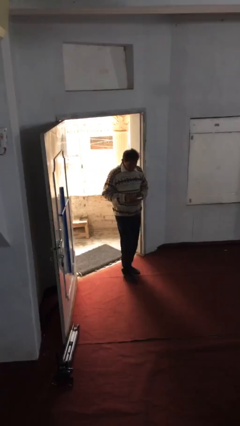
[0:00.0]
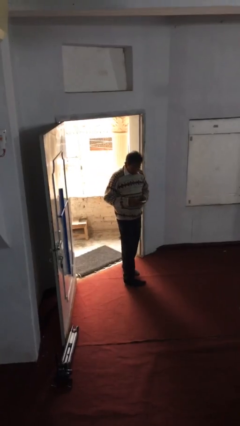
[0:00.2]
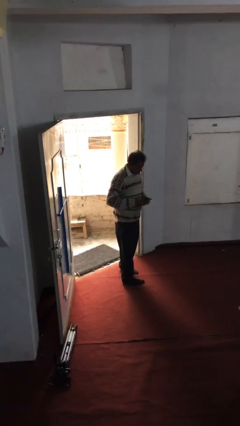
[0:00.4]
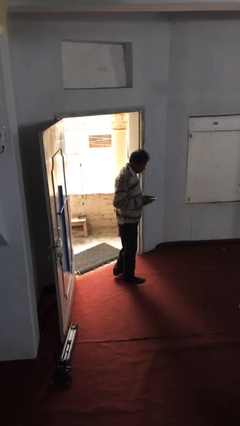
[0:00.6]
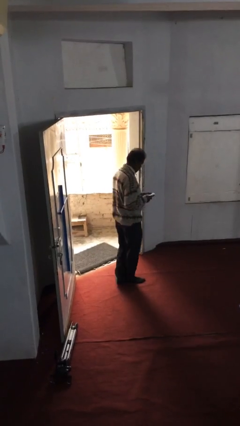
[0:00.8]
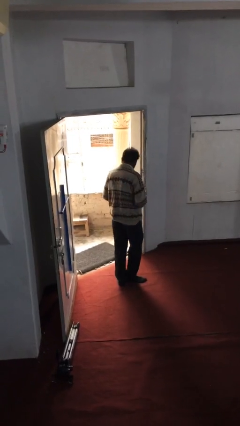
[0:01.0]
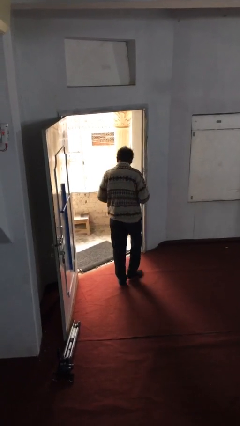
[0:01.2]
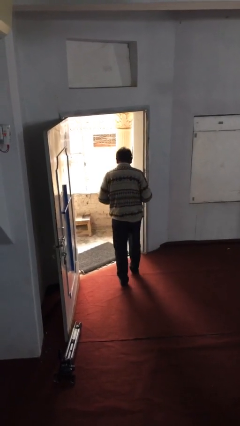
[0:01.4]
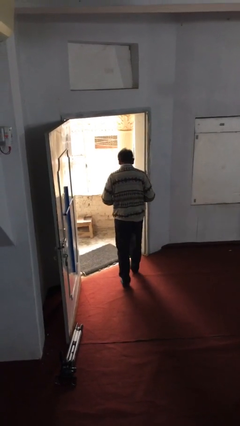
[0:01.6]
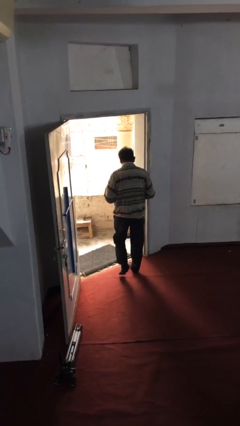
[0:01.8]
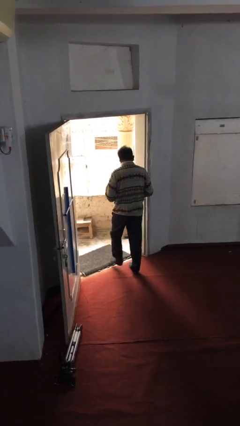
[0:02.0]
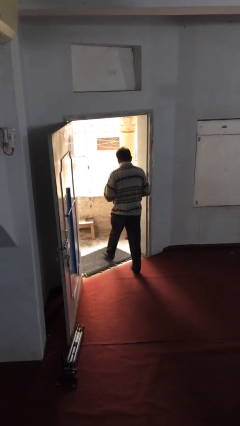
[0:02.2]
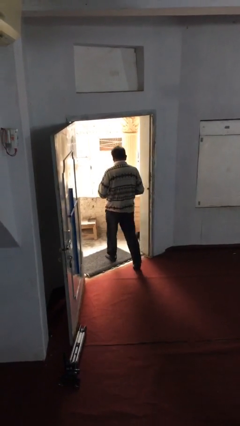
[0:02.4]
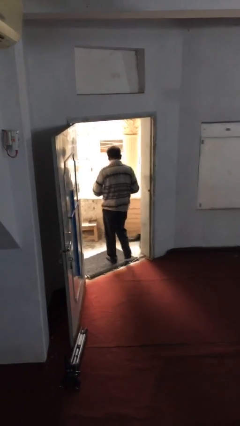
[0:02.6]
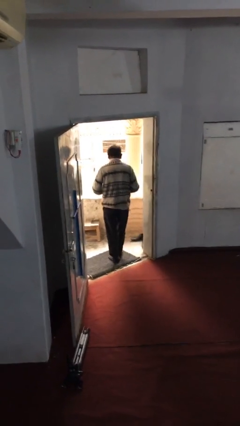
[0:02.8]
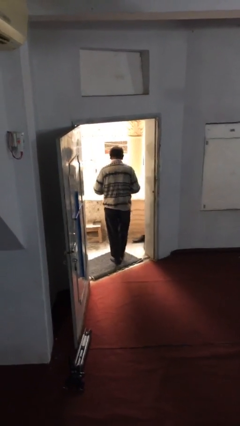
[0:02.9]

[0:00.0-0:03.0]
person exits scene through structure

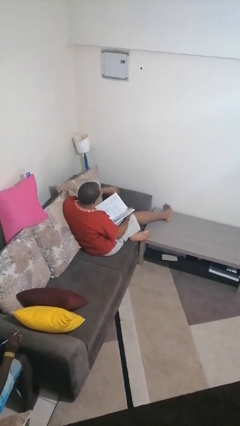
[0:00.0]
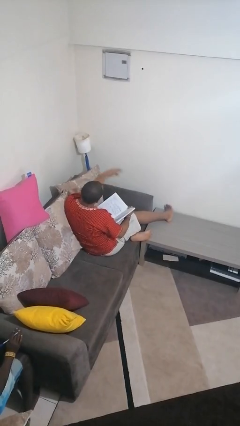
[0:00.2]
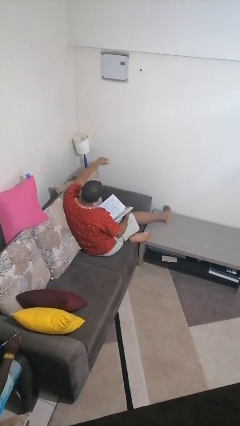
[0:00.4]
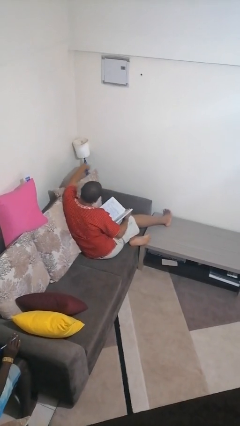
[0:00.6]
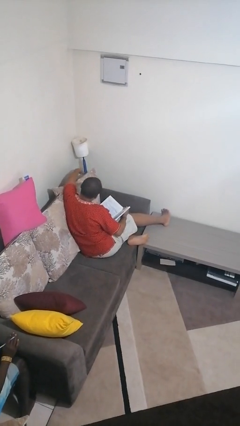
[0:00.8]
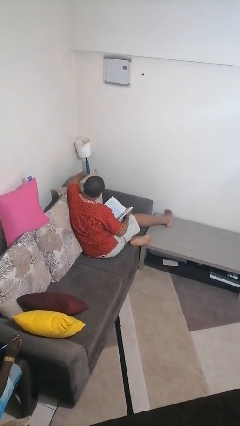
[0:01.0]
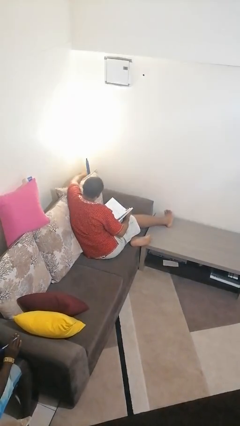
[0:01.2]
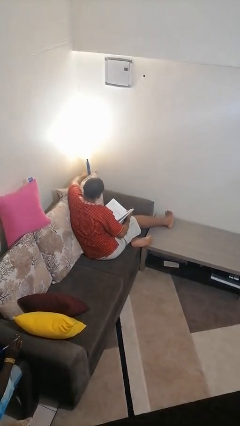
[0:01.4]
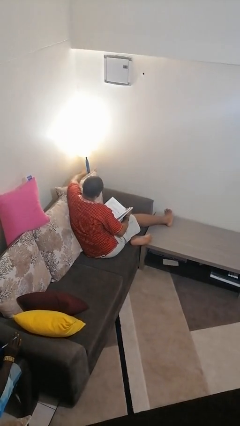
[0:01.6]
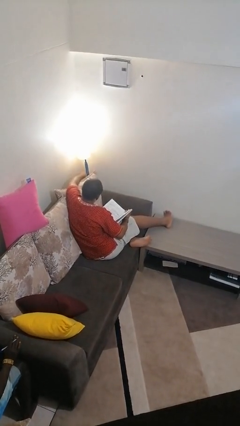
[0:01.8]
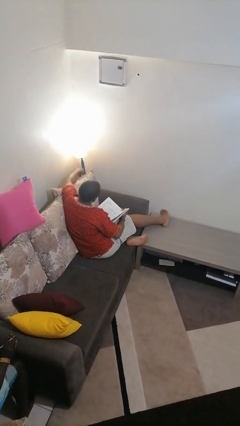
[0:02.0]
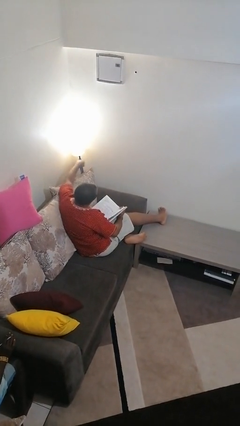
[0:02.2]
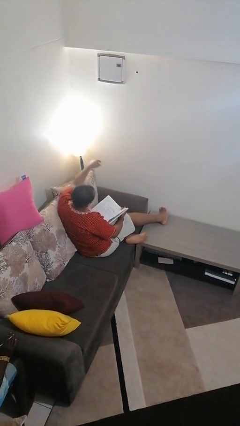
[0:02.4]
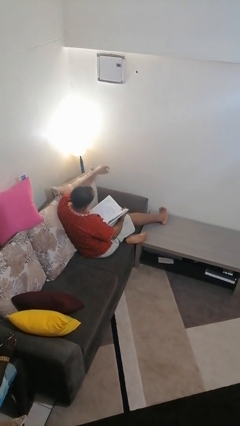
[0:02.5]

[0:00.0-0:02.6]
person turns on lamp

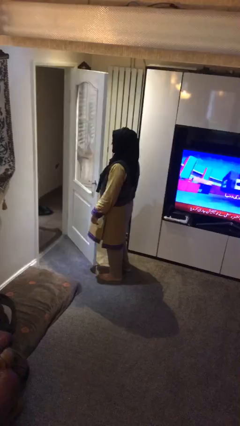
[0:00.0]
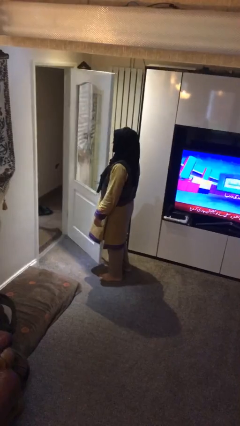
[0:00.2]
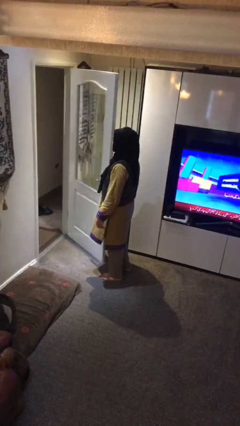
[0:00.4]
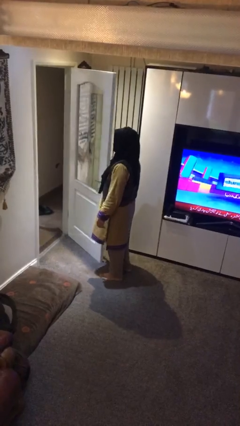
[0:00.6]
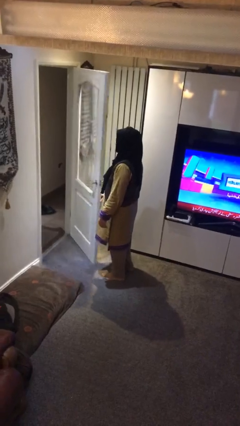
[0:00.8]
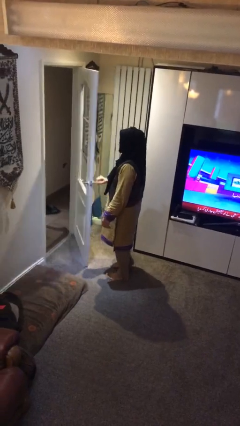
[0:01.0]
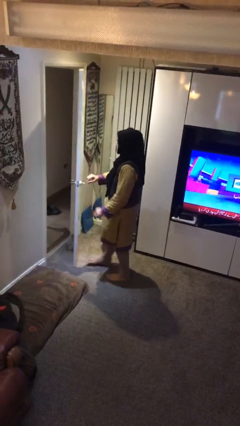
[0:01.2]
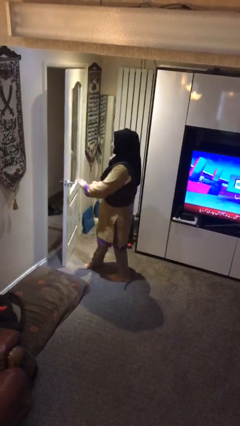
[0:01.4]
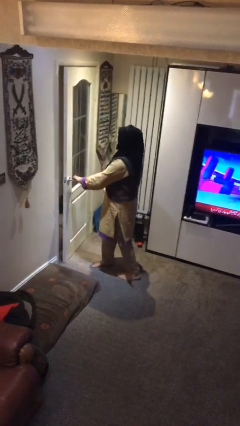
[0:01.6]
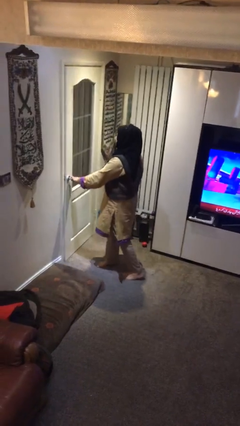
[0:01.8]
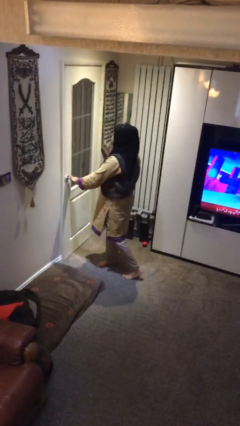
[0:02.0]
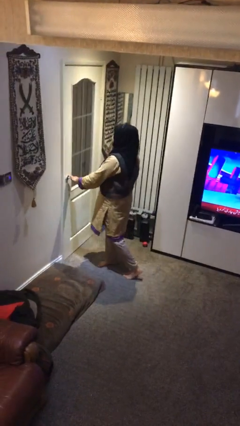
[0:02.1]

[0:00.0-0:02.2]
person closes facility door

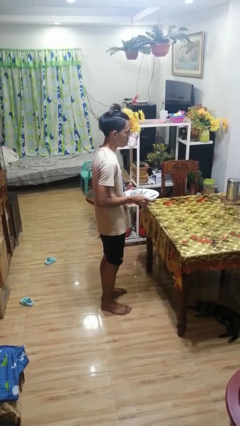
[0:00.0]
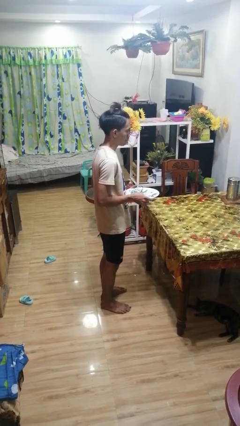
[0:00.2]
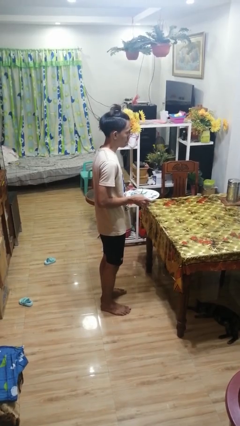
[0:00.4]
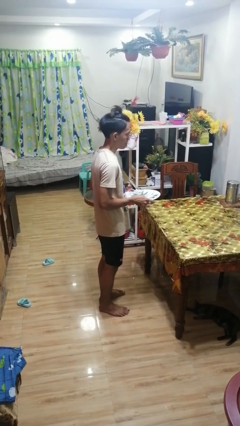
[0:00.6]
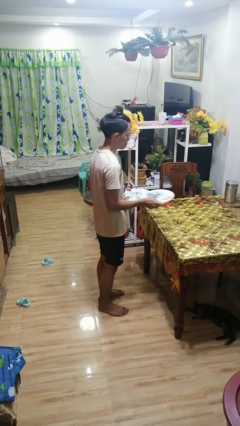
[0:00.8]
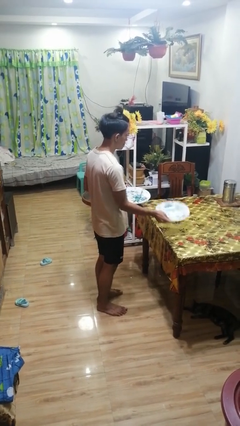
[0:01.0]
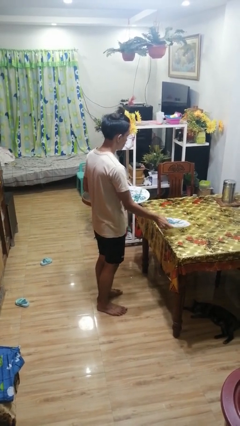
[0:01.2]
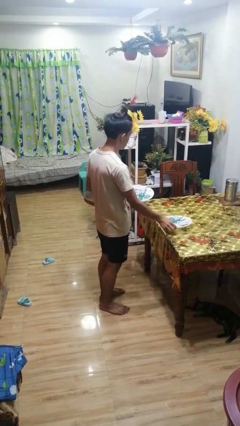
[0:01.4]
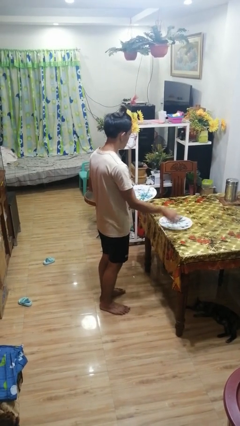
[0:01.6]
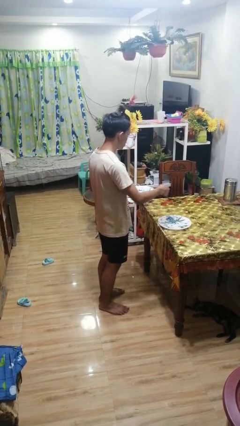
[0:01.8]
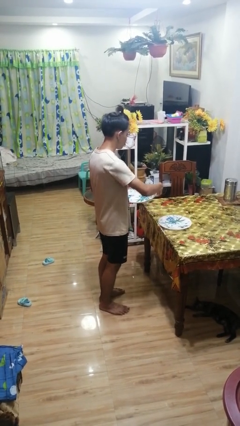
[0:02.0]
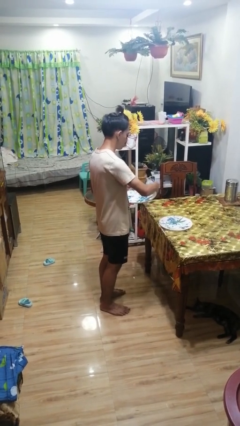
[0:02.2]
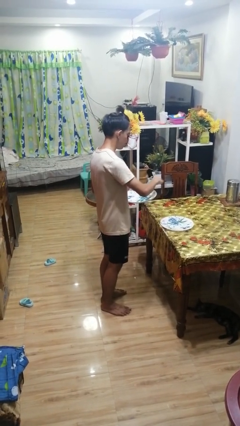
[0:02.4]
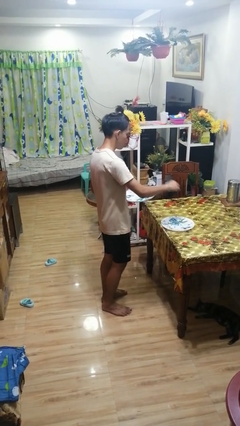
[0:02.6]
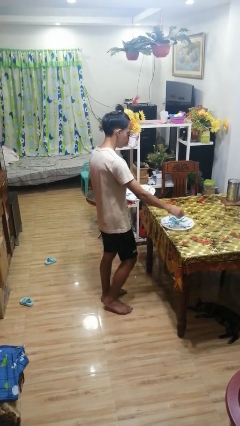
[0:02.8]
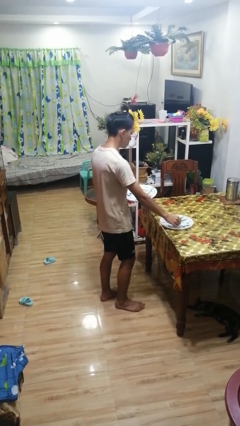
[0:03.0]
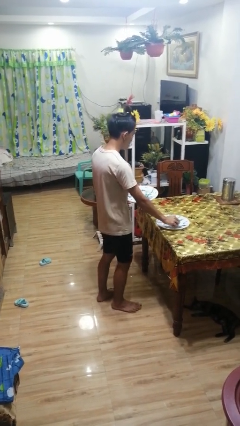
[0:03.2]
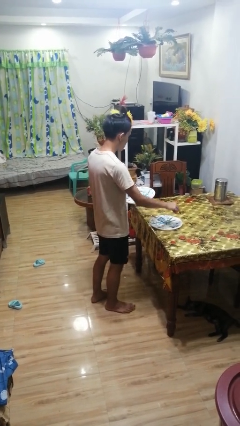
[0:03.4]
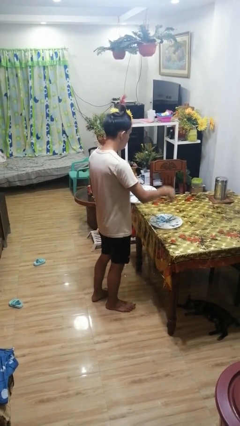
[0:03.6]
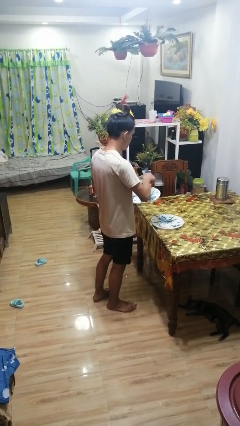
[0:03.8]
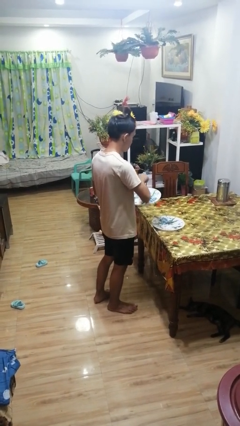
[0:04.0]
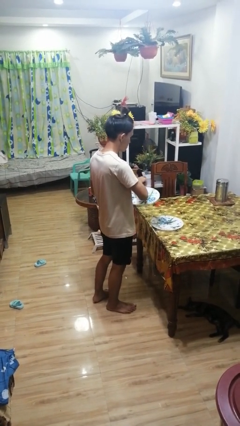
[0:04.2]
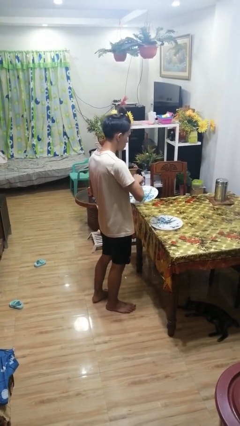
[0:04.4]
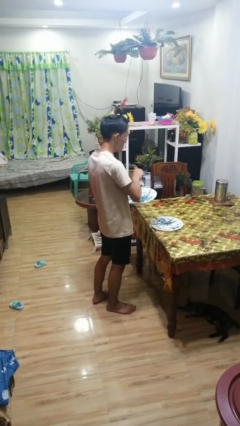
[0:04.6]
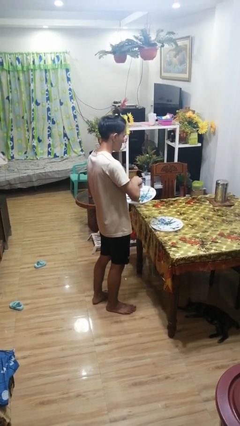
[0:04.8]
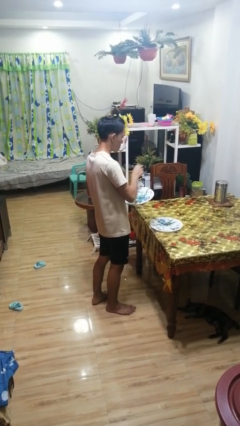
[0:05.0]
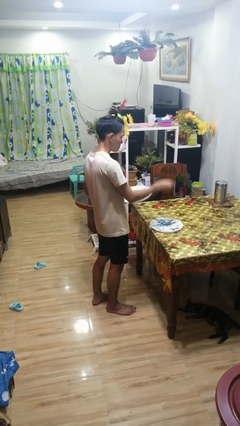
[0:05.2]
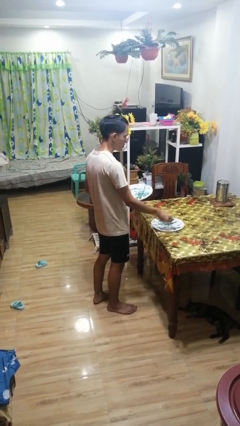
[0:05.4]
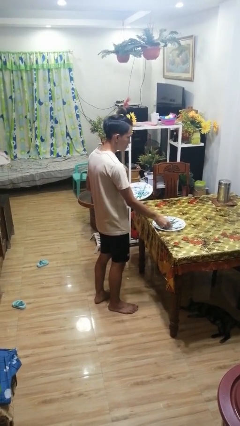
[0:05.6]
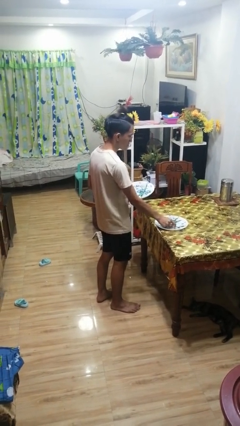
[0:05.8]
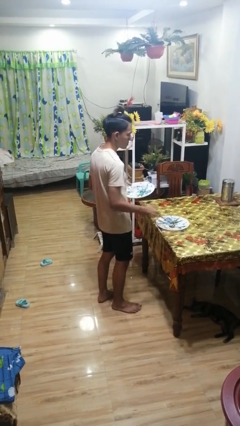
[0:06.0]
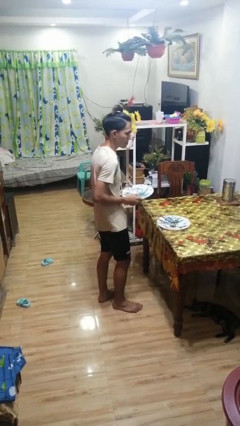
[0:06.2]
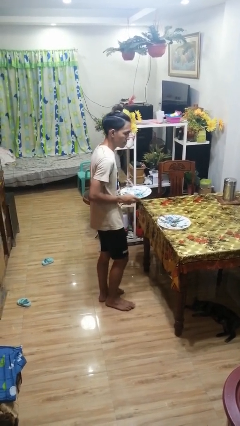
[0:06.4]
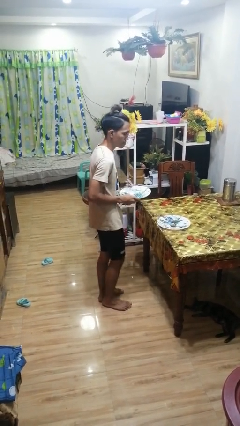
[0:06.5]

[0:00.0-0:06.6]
person sets table

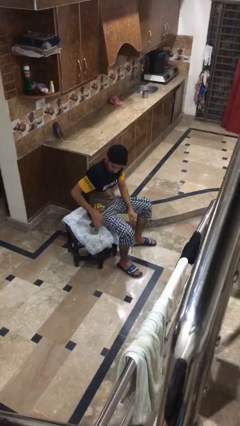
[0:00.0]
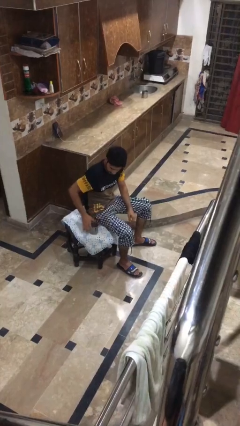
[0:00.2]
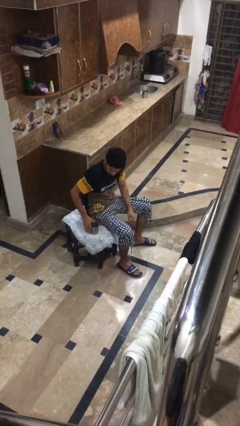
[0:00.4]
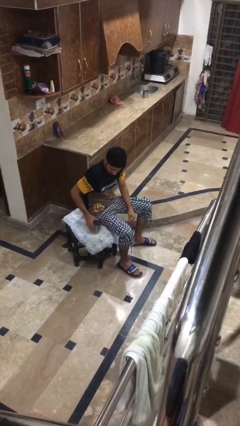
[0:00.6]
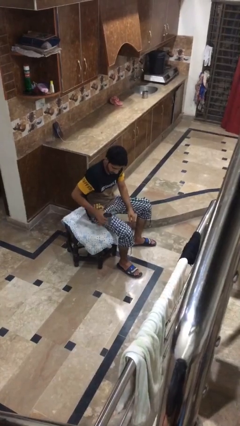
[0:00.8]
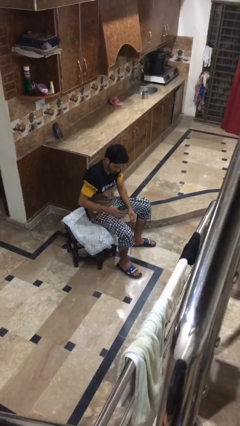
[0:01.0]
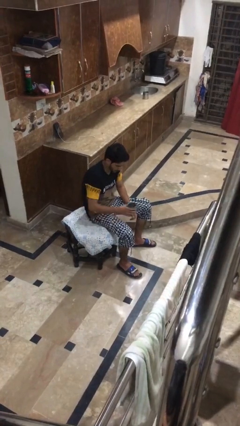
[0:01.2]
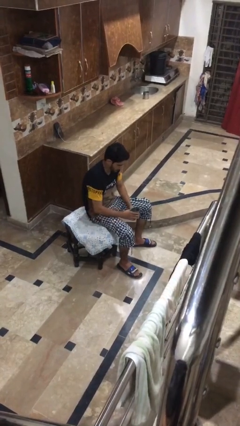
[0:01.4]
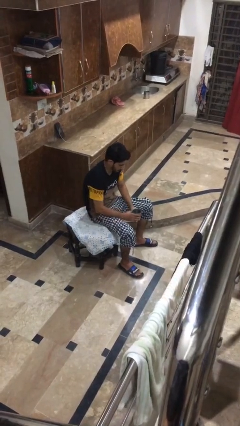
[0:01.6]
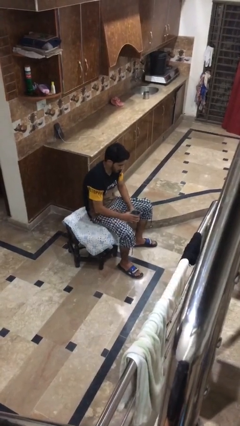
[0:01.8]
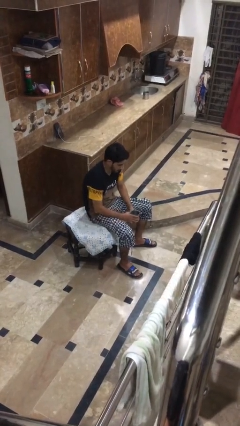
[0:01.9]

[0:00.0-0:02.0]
person picks up object from table

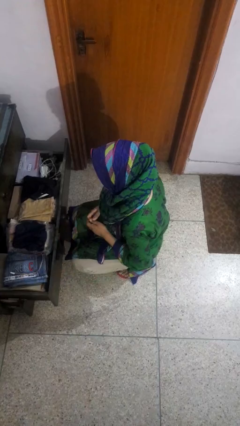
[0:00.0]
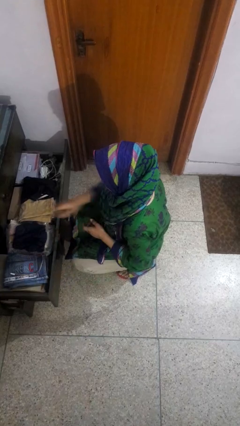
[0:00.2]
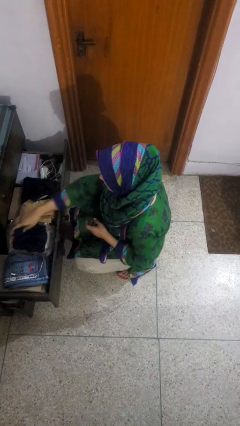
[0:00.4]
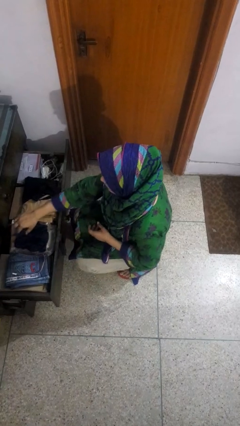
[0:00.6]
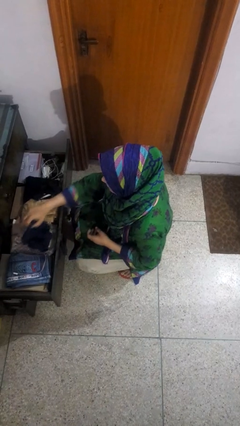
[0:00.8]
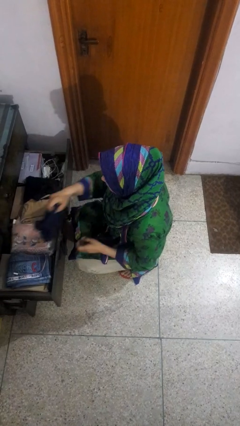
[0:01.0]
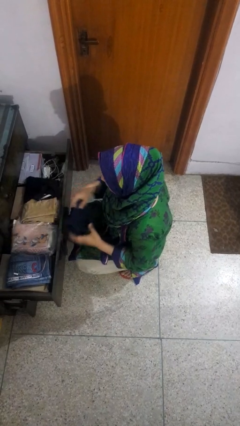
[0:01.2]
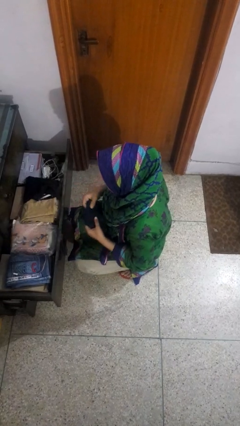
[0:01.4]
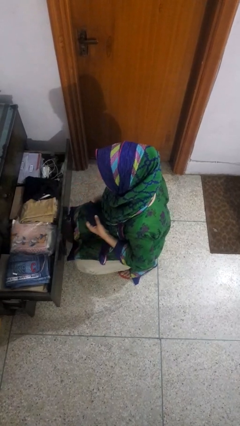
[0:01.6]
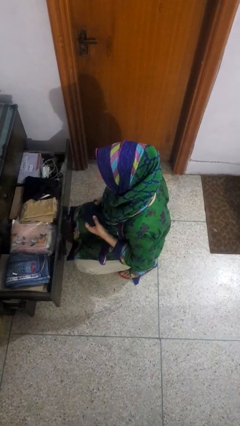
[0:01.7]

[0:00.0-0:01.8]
person takes clothes from dresser
